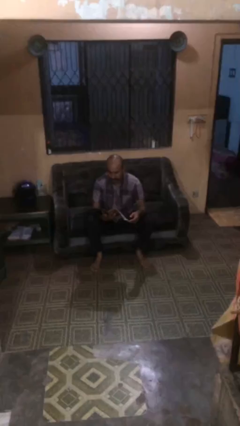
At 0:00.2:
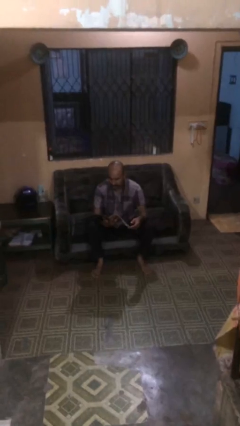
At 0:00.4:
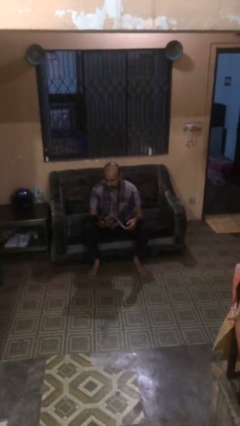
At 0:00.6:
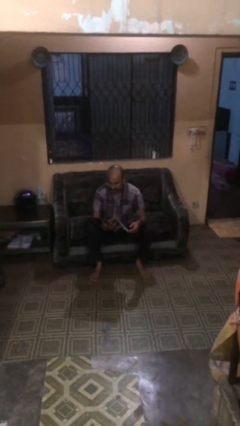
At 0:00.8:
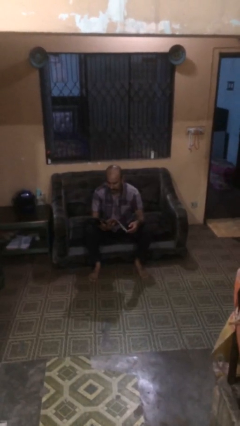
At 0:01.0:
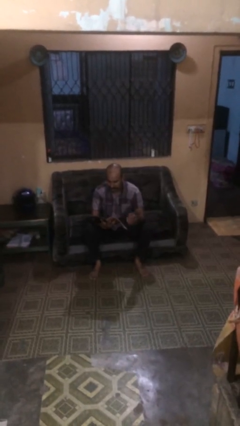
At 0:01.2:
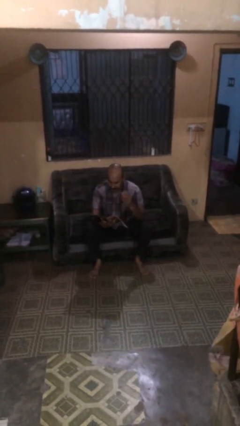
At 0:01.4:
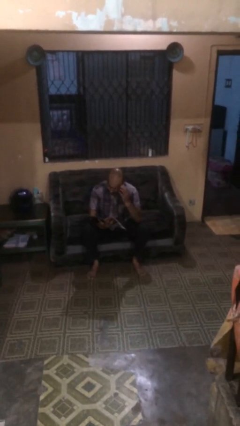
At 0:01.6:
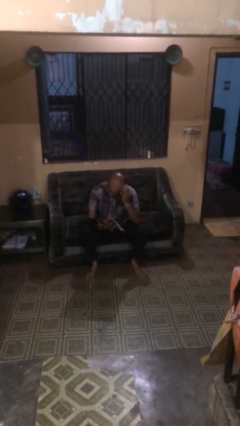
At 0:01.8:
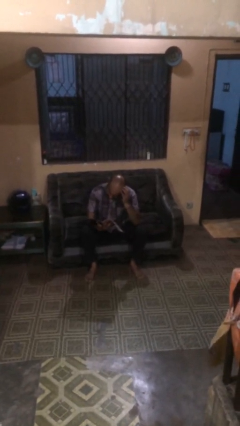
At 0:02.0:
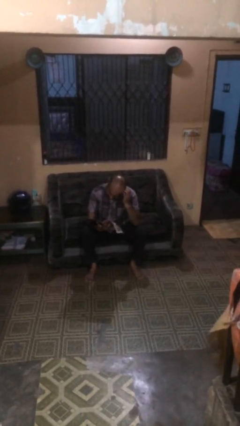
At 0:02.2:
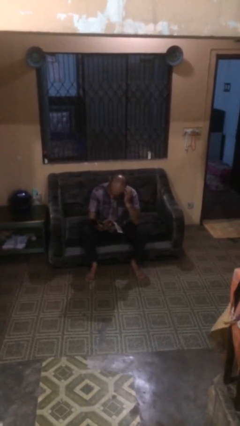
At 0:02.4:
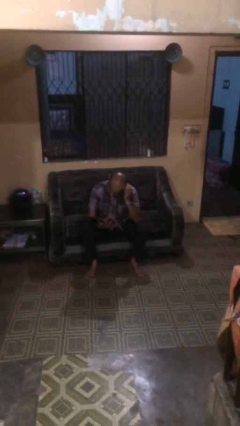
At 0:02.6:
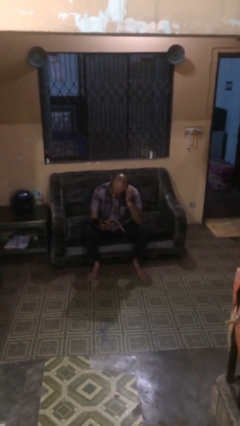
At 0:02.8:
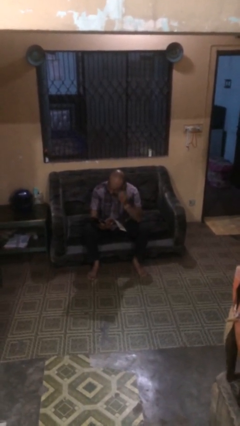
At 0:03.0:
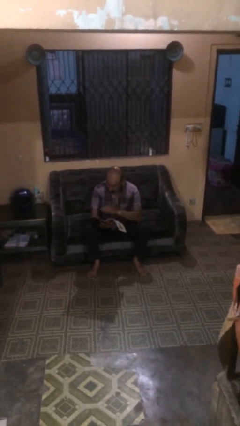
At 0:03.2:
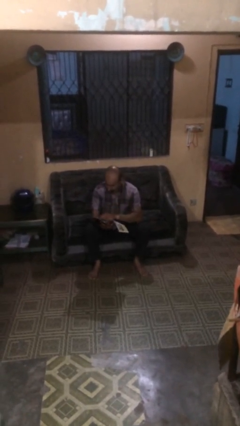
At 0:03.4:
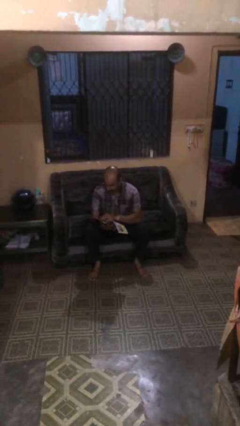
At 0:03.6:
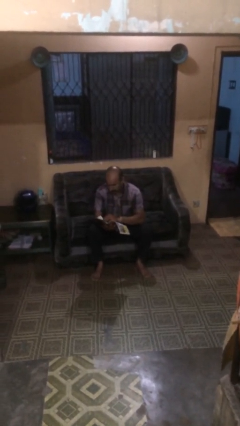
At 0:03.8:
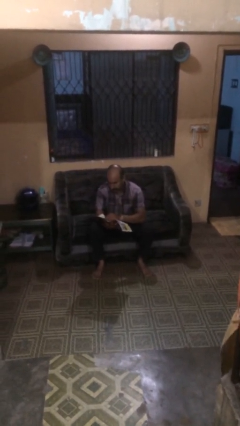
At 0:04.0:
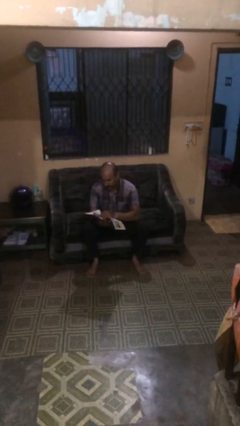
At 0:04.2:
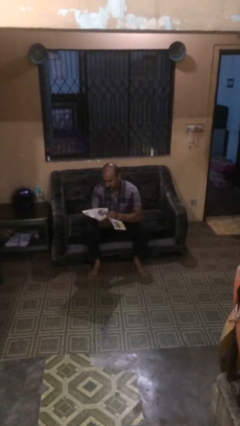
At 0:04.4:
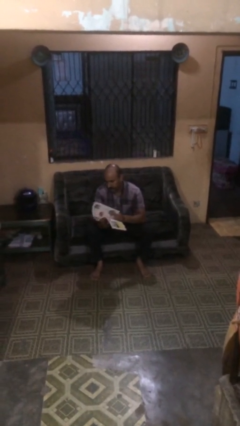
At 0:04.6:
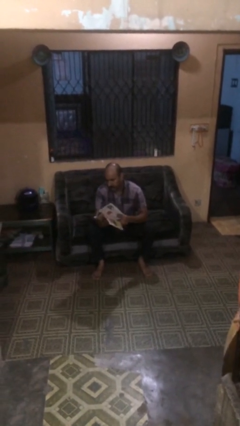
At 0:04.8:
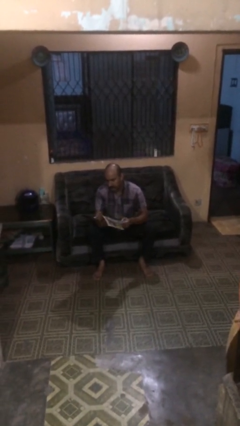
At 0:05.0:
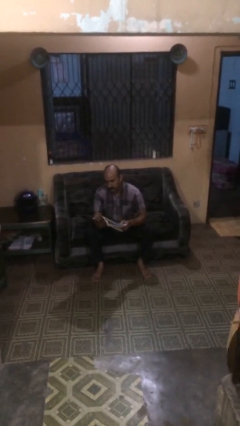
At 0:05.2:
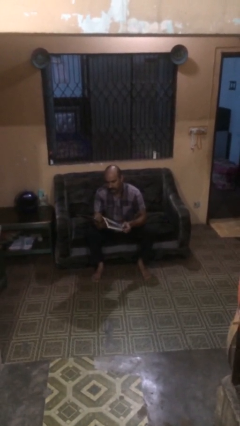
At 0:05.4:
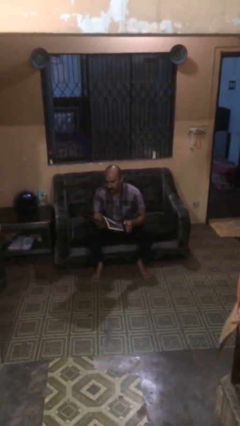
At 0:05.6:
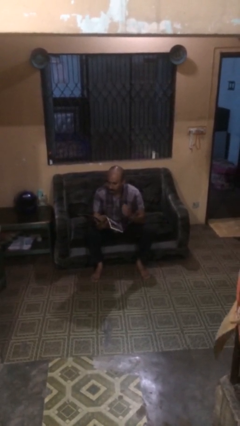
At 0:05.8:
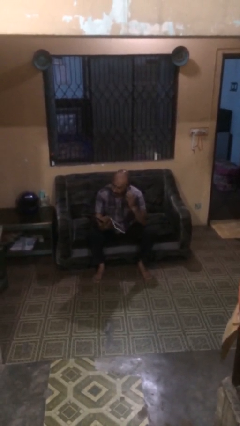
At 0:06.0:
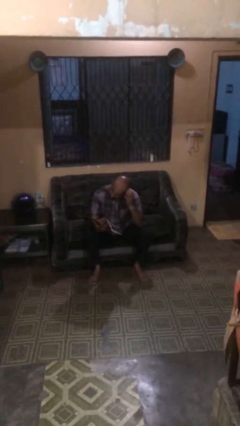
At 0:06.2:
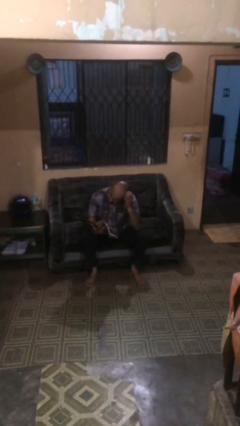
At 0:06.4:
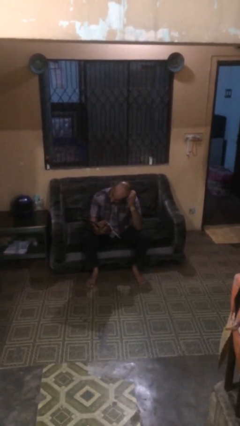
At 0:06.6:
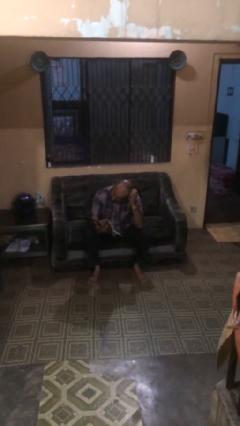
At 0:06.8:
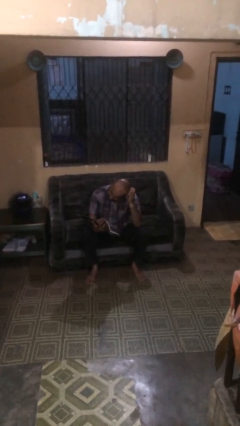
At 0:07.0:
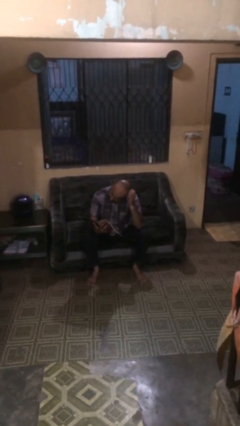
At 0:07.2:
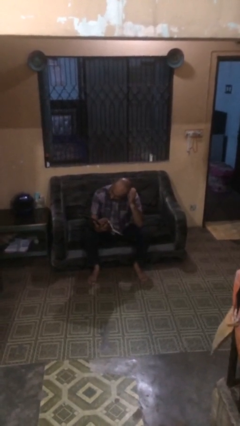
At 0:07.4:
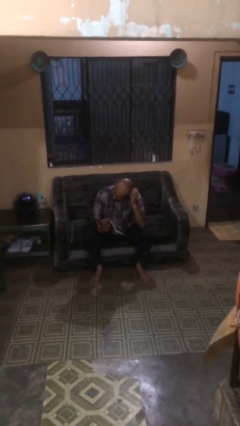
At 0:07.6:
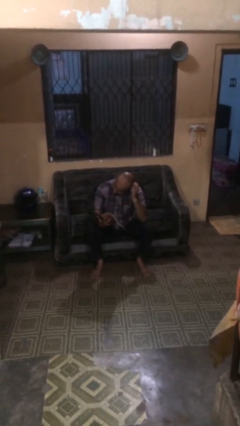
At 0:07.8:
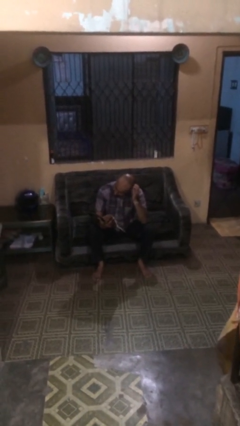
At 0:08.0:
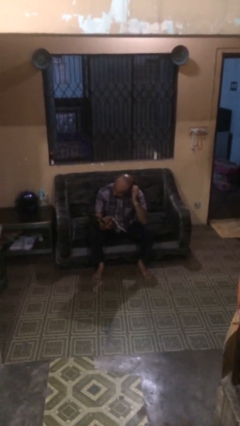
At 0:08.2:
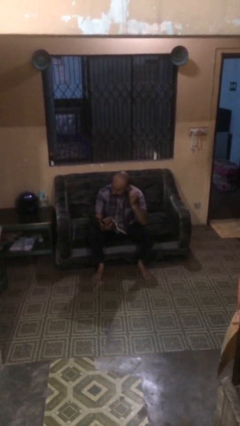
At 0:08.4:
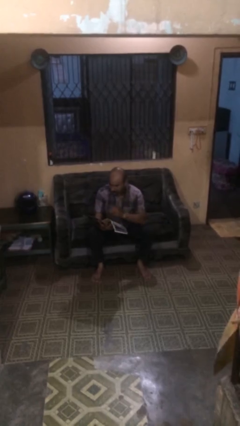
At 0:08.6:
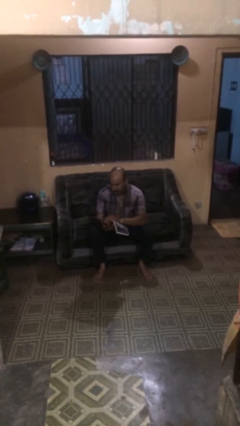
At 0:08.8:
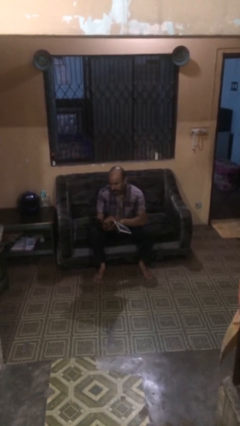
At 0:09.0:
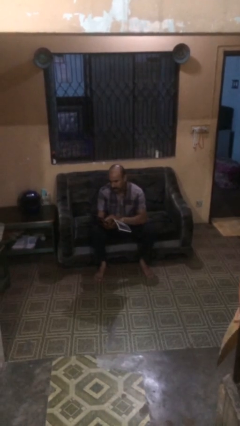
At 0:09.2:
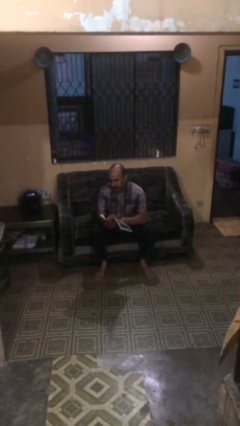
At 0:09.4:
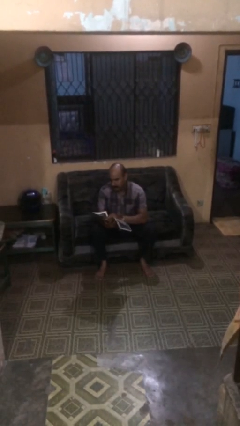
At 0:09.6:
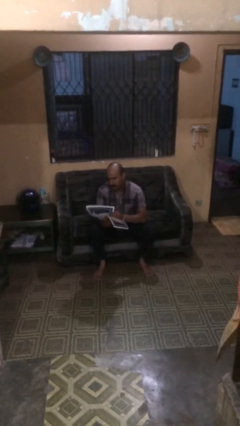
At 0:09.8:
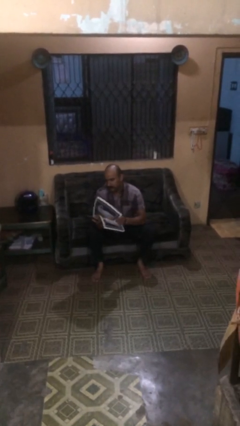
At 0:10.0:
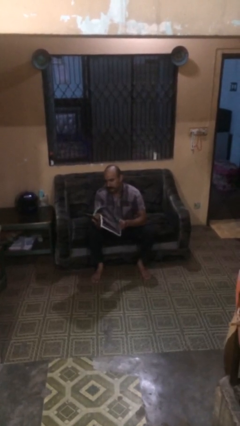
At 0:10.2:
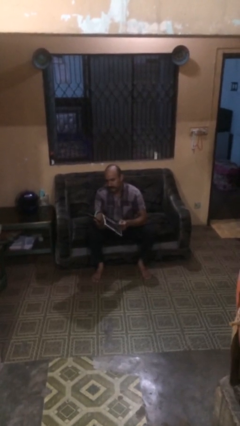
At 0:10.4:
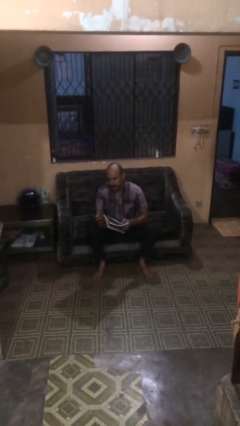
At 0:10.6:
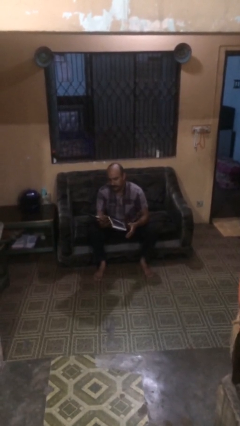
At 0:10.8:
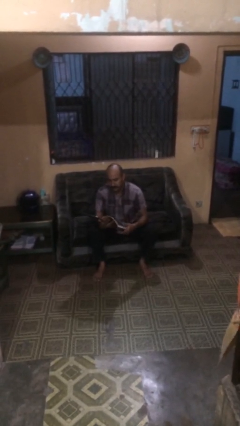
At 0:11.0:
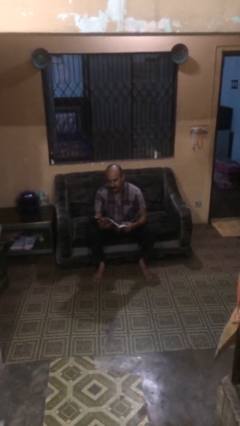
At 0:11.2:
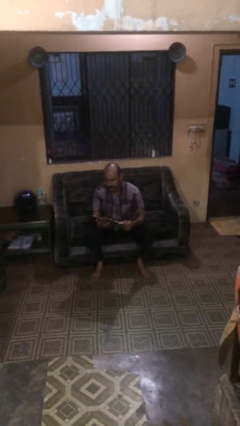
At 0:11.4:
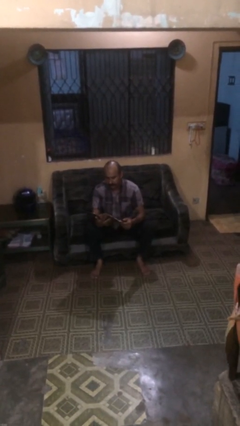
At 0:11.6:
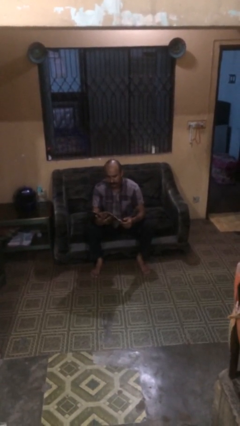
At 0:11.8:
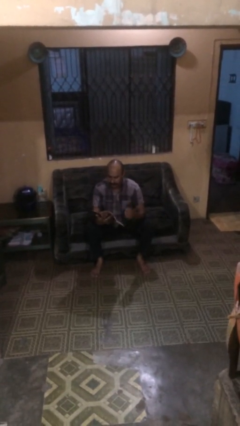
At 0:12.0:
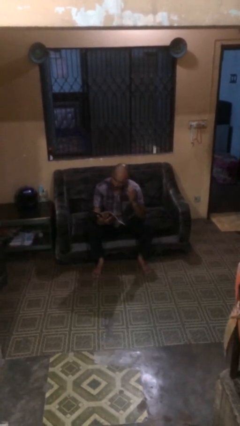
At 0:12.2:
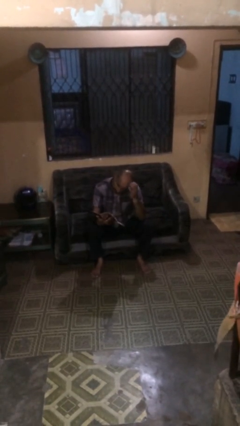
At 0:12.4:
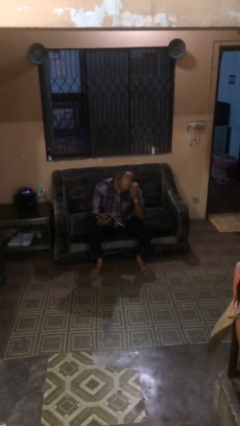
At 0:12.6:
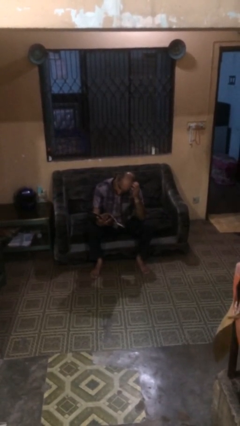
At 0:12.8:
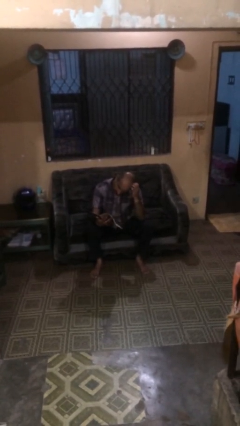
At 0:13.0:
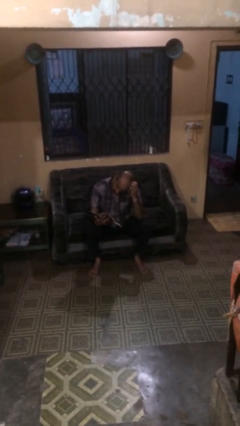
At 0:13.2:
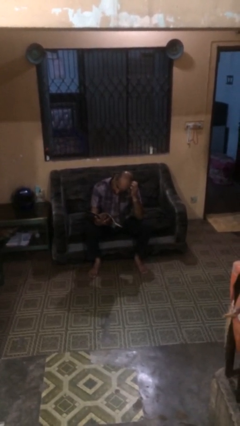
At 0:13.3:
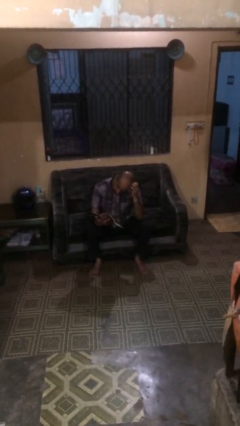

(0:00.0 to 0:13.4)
person reads document

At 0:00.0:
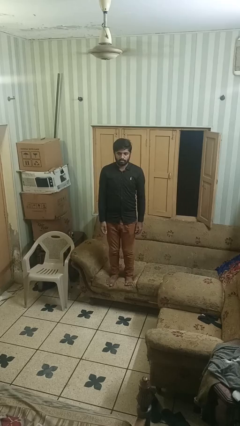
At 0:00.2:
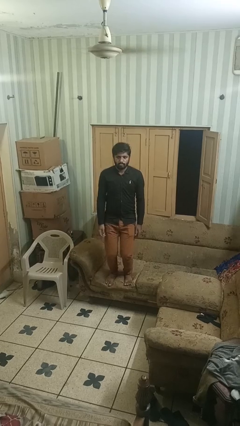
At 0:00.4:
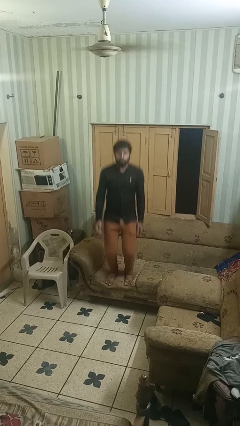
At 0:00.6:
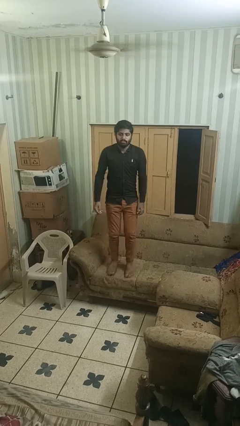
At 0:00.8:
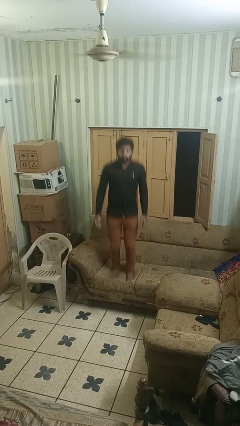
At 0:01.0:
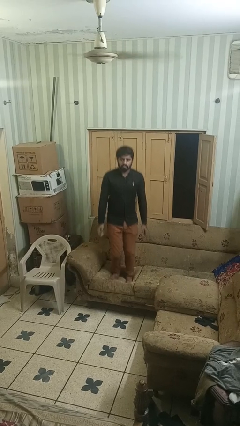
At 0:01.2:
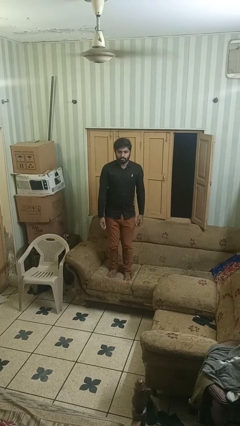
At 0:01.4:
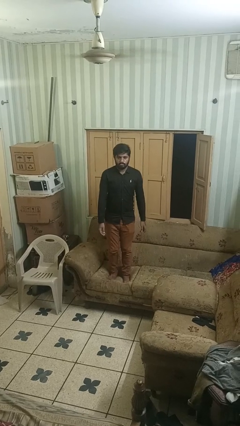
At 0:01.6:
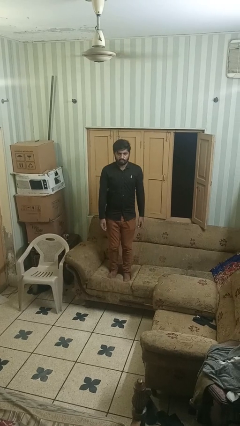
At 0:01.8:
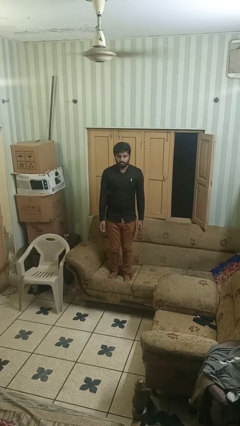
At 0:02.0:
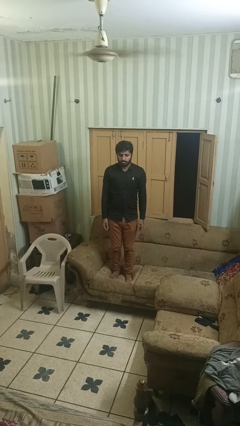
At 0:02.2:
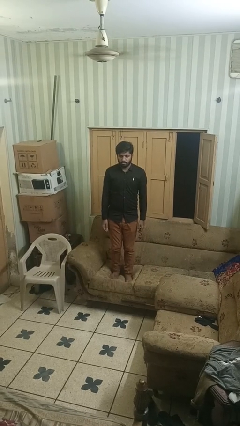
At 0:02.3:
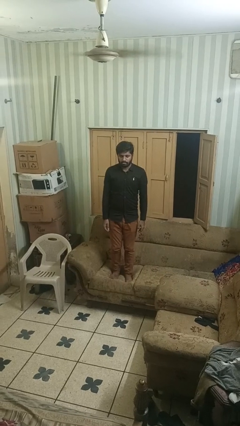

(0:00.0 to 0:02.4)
person jumps on couch

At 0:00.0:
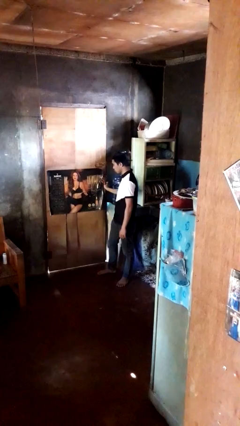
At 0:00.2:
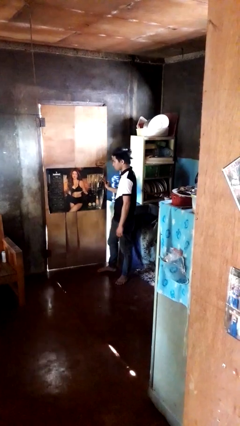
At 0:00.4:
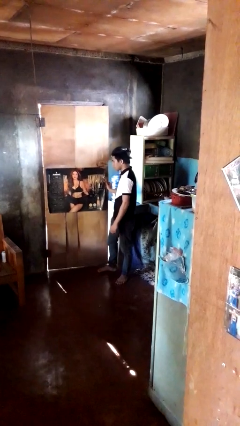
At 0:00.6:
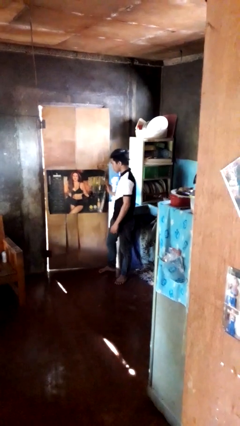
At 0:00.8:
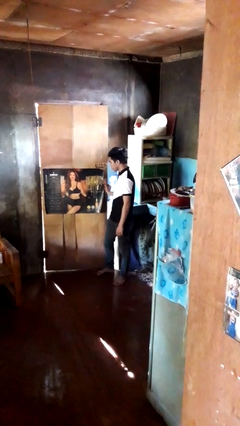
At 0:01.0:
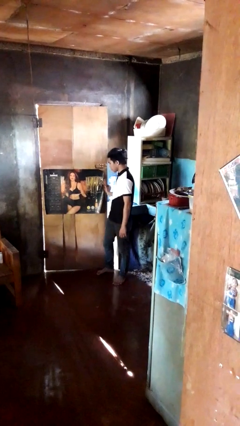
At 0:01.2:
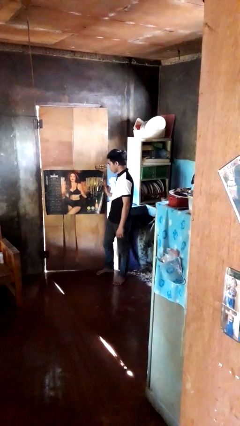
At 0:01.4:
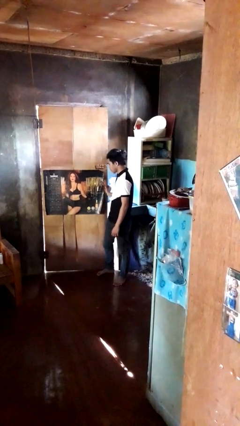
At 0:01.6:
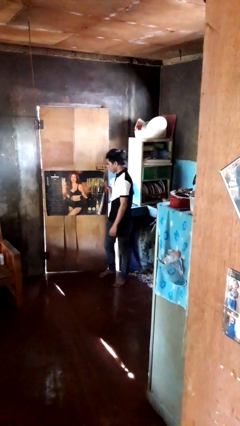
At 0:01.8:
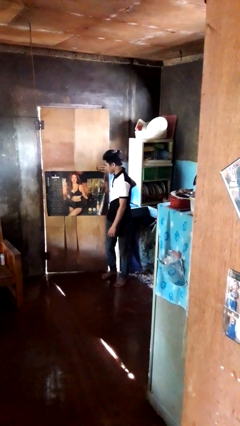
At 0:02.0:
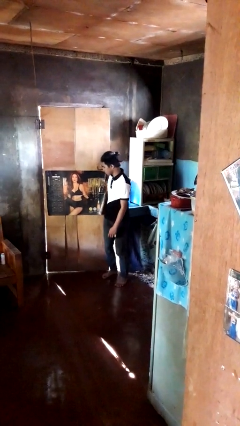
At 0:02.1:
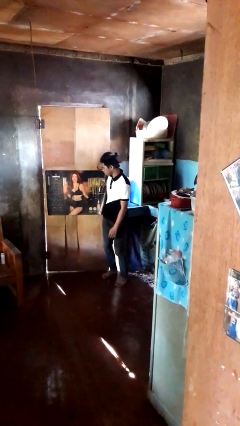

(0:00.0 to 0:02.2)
person opens facility door
